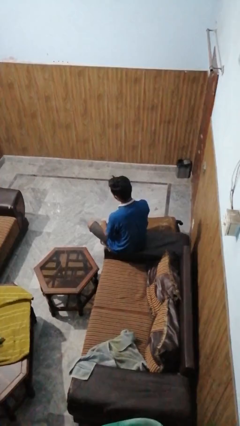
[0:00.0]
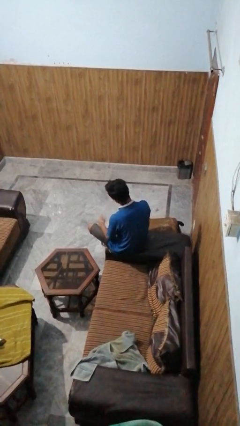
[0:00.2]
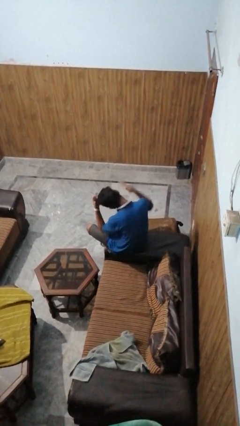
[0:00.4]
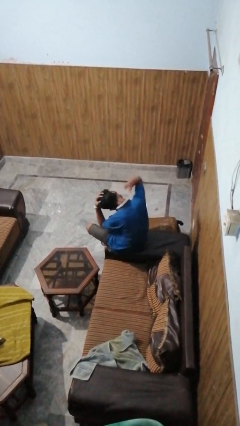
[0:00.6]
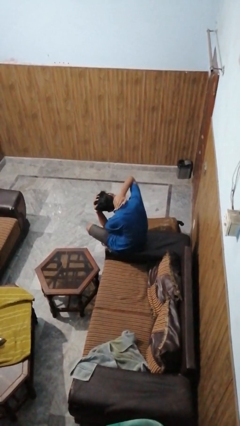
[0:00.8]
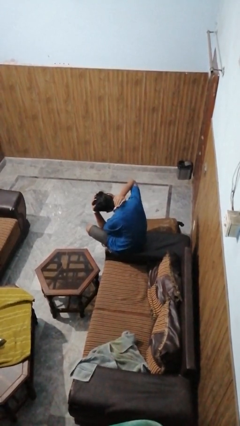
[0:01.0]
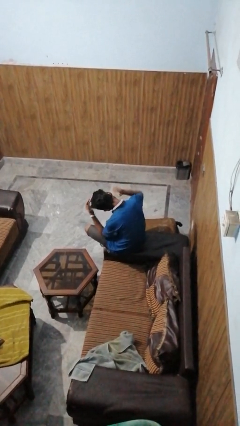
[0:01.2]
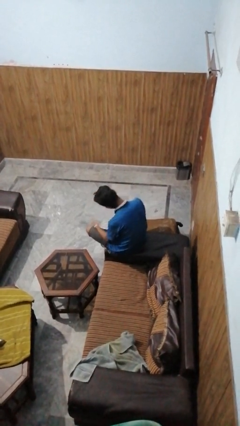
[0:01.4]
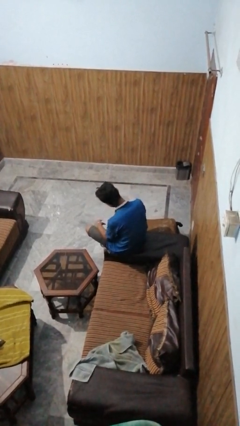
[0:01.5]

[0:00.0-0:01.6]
person swats bug

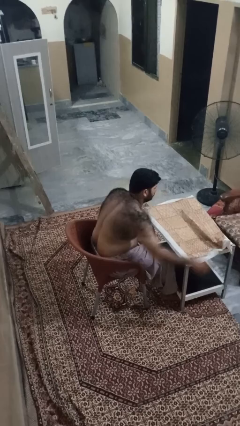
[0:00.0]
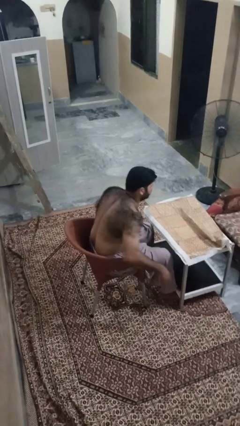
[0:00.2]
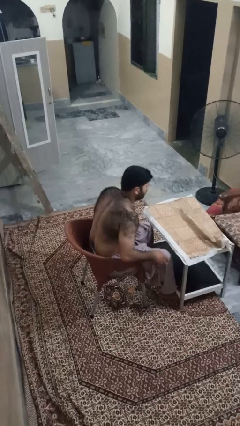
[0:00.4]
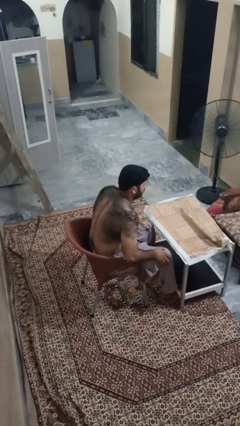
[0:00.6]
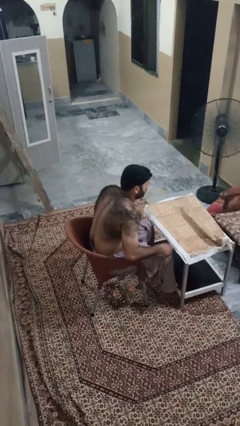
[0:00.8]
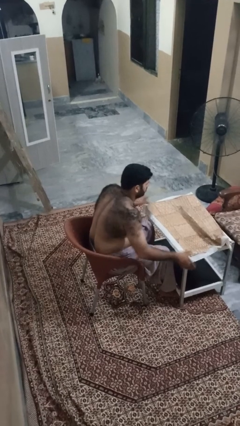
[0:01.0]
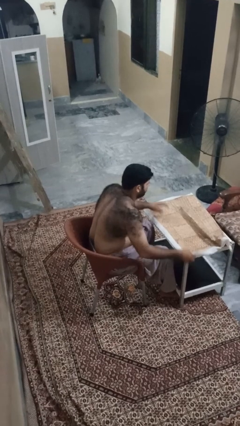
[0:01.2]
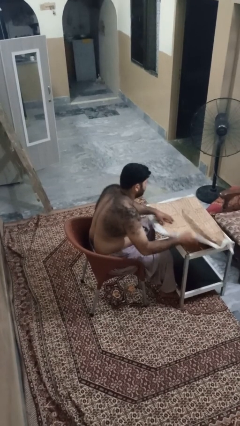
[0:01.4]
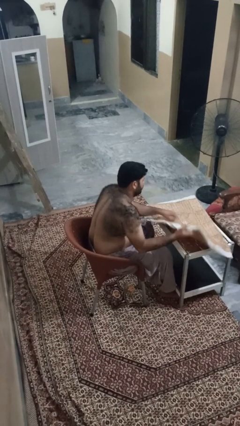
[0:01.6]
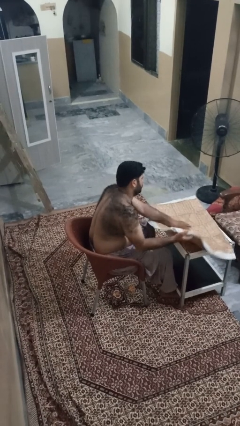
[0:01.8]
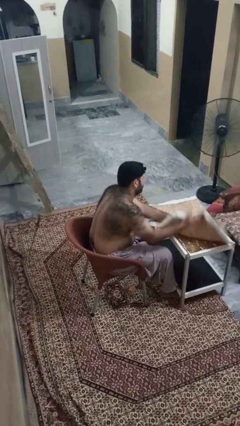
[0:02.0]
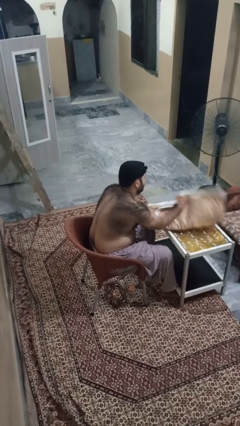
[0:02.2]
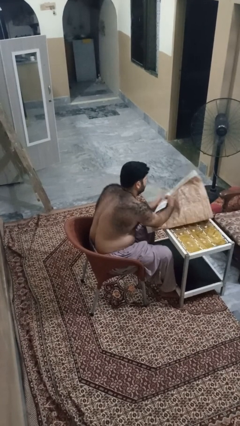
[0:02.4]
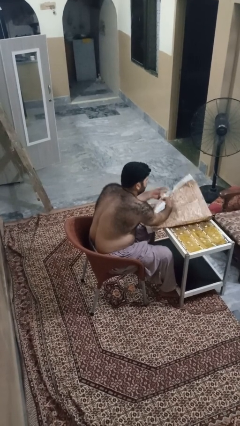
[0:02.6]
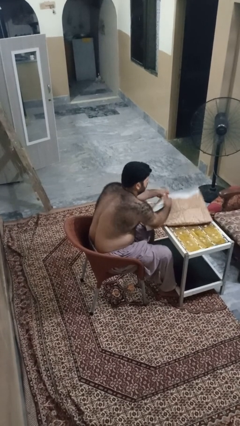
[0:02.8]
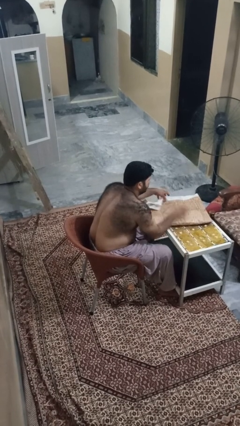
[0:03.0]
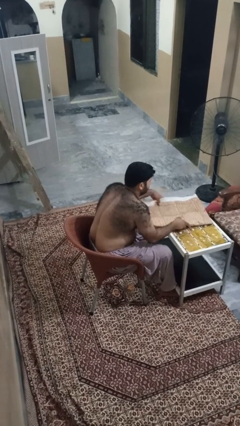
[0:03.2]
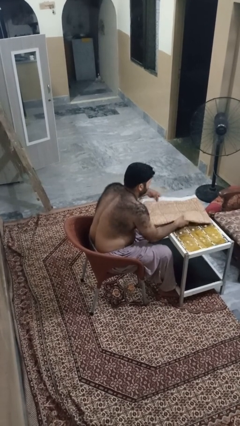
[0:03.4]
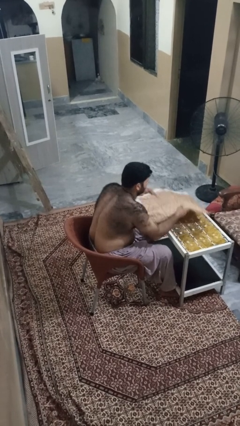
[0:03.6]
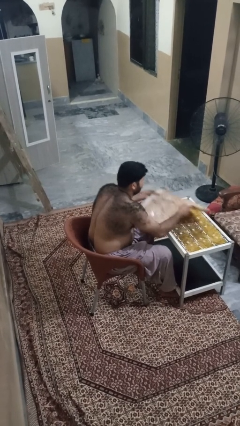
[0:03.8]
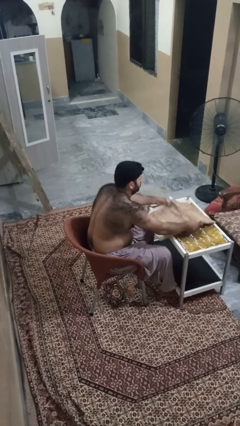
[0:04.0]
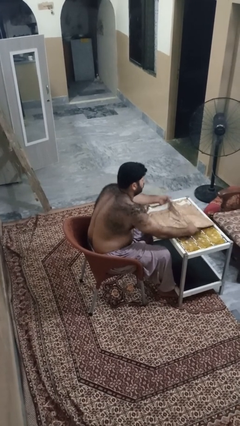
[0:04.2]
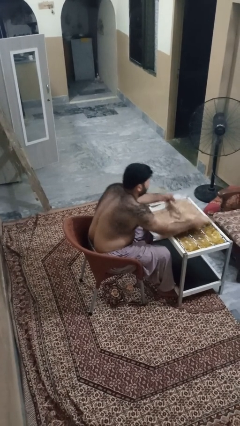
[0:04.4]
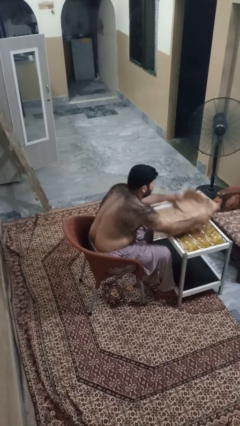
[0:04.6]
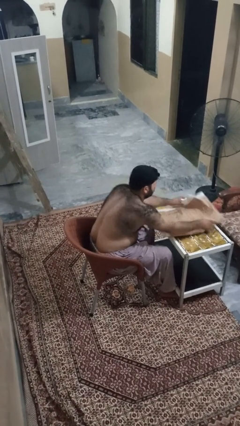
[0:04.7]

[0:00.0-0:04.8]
person folds tablecloth

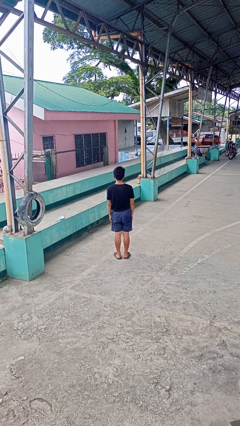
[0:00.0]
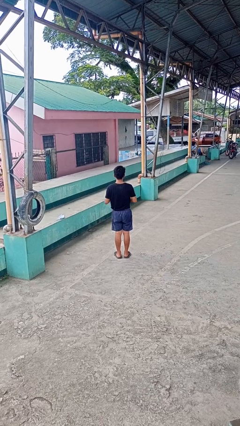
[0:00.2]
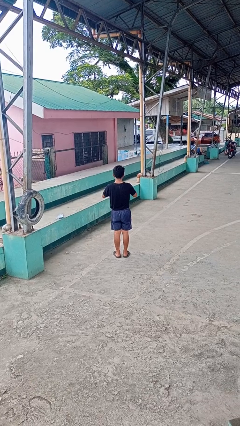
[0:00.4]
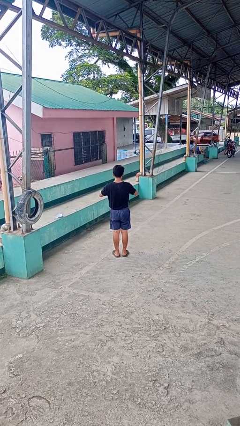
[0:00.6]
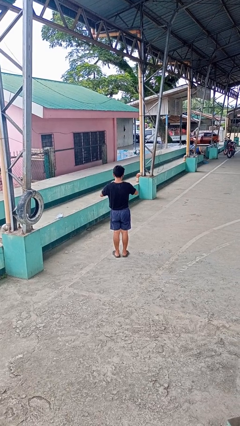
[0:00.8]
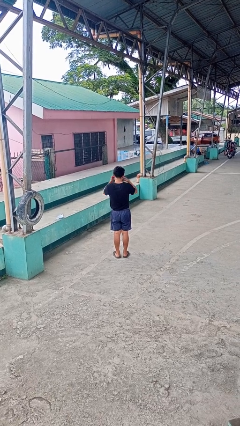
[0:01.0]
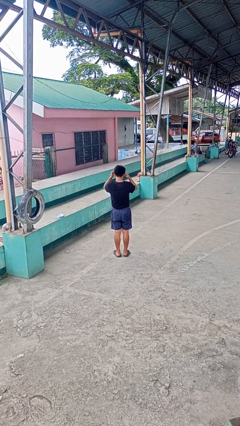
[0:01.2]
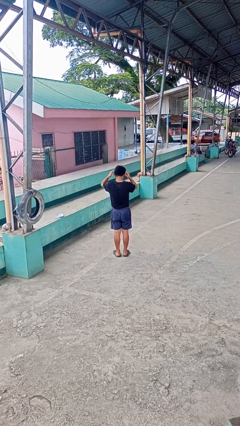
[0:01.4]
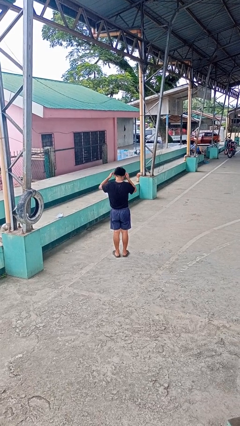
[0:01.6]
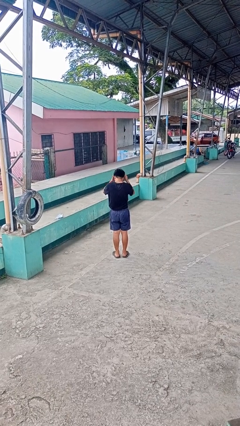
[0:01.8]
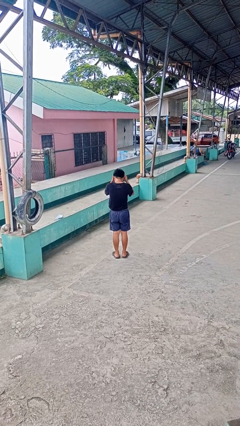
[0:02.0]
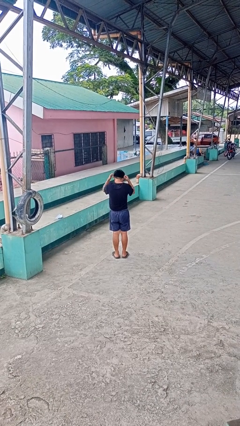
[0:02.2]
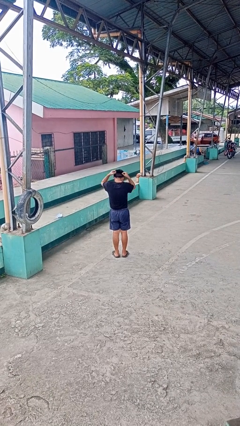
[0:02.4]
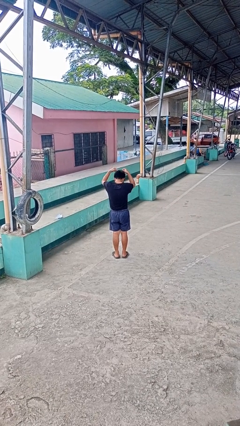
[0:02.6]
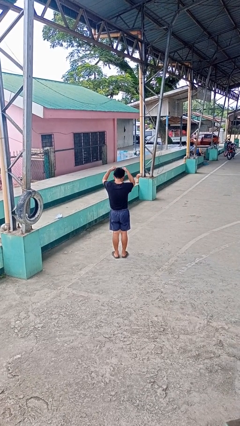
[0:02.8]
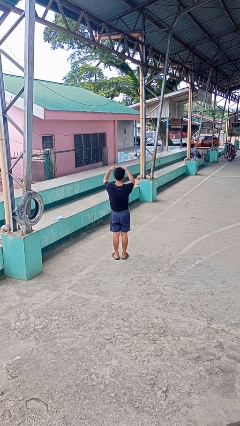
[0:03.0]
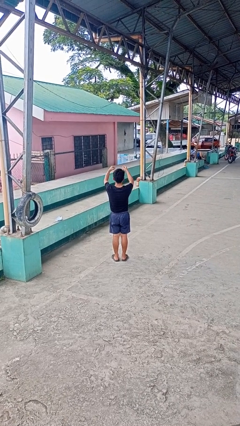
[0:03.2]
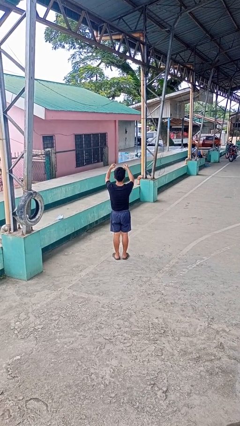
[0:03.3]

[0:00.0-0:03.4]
person takes off necklace

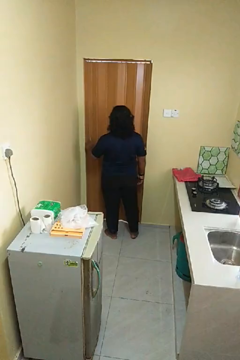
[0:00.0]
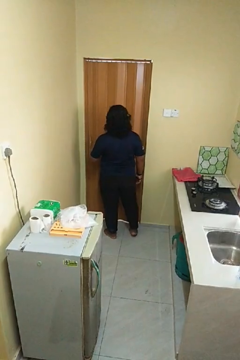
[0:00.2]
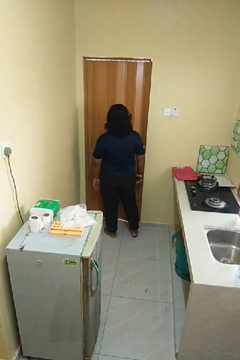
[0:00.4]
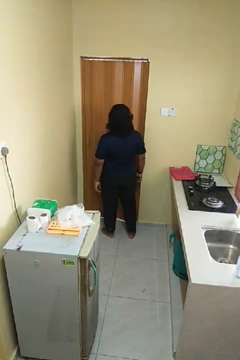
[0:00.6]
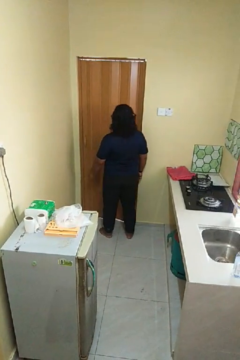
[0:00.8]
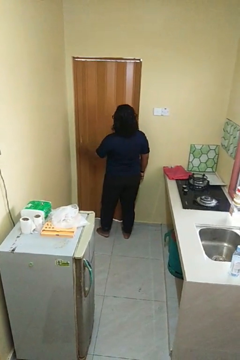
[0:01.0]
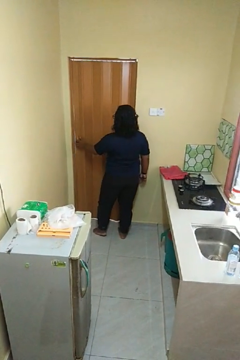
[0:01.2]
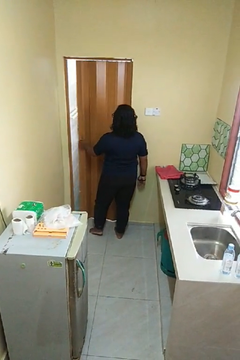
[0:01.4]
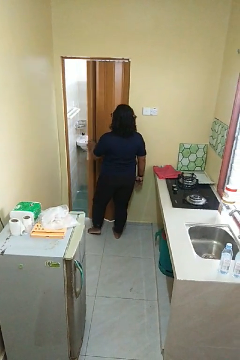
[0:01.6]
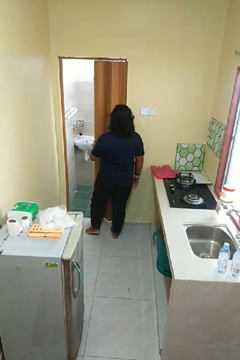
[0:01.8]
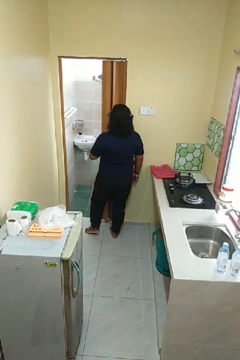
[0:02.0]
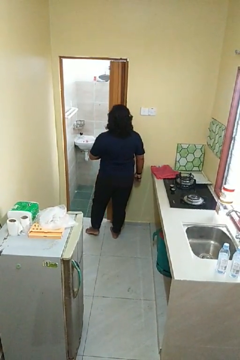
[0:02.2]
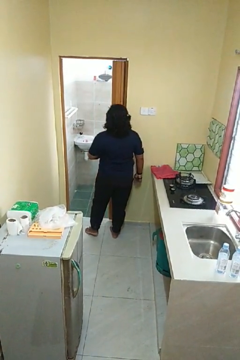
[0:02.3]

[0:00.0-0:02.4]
person opens sliding door

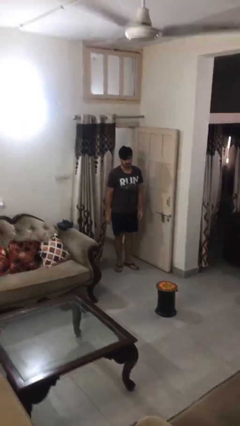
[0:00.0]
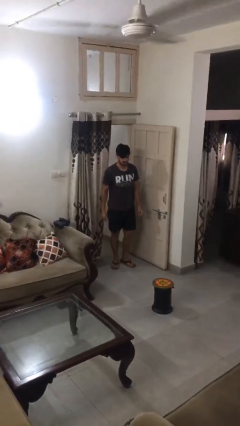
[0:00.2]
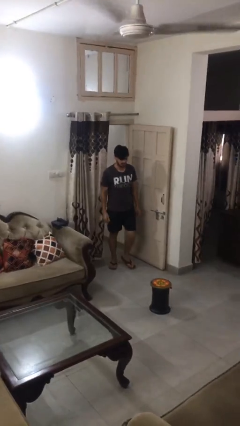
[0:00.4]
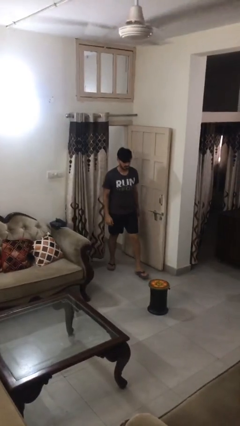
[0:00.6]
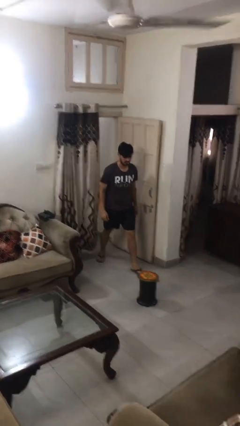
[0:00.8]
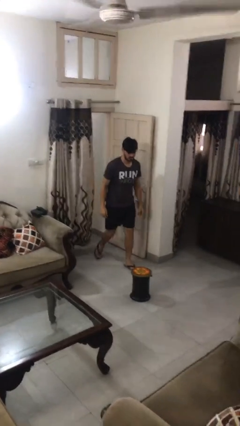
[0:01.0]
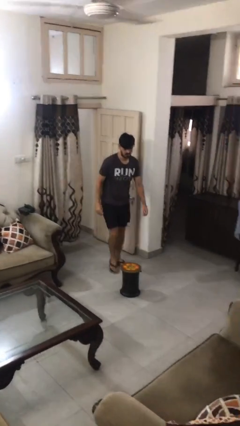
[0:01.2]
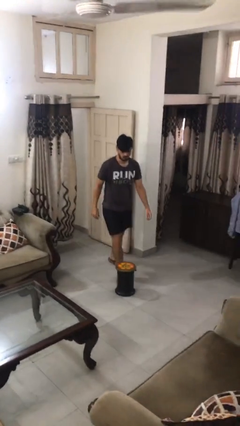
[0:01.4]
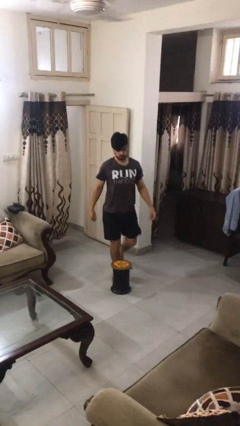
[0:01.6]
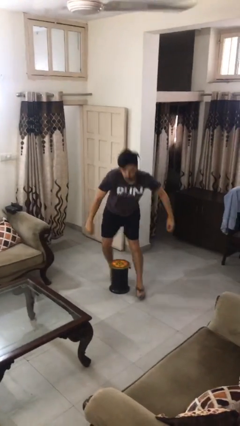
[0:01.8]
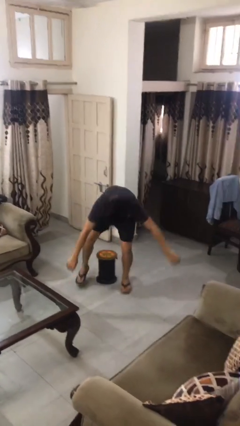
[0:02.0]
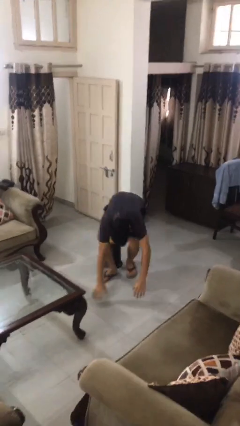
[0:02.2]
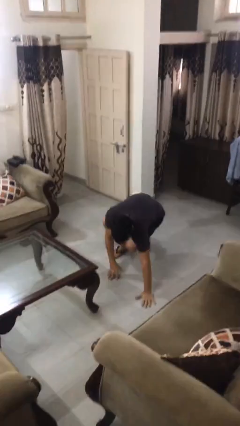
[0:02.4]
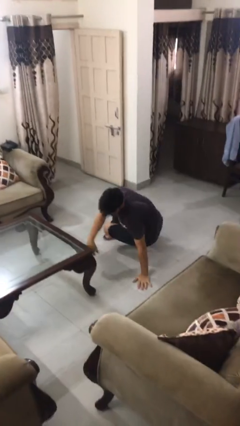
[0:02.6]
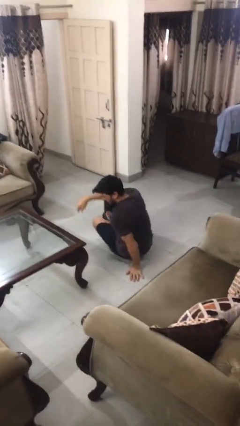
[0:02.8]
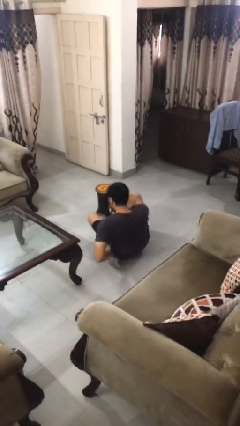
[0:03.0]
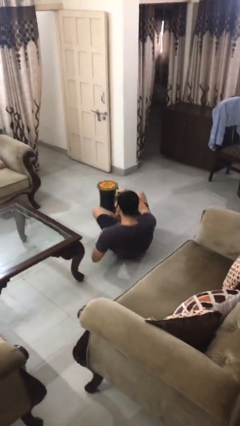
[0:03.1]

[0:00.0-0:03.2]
person trips on object on floor

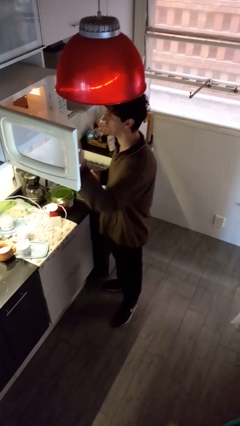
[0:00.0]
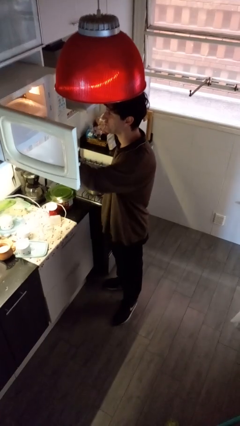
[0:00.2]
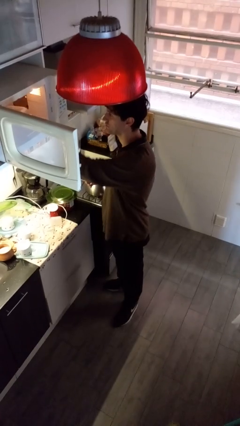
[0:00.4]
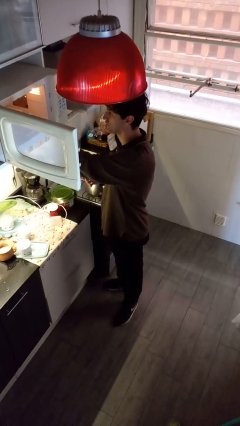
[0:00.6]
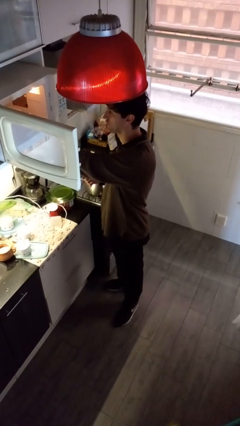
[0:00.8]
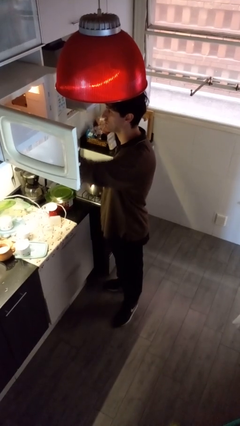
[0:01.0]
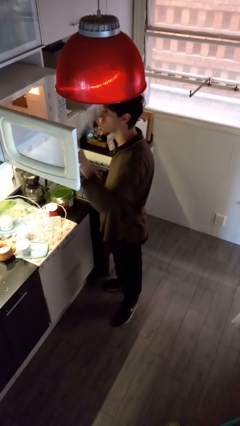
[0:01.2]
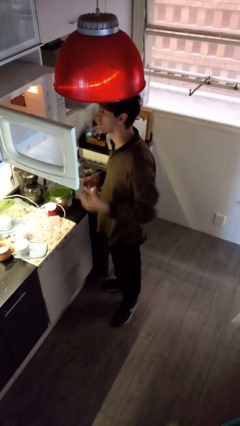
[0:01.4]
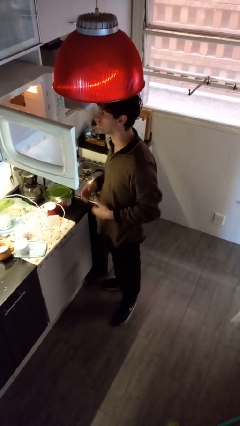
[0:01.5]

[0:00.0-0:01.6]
person puts object into microwave

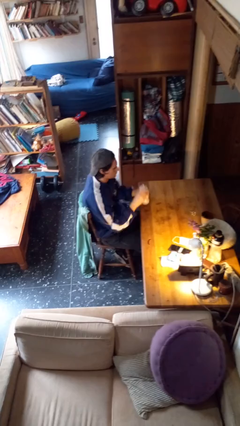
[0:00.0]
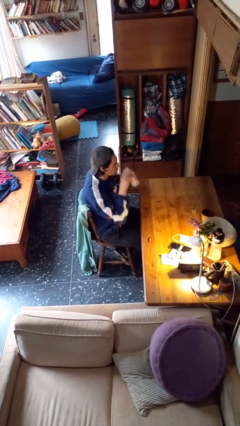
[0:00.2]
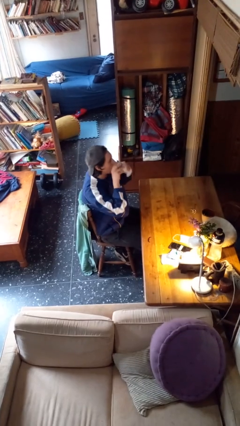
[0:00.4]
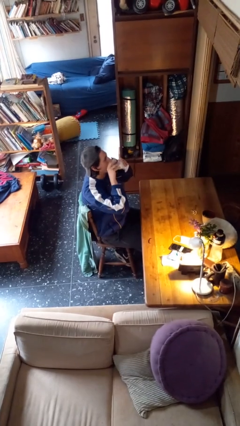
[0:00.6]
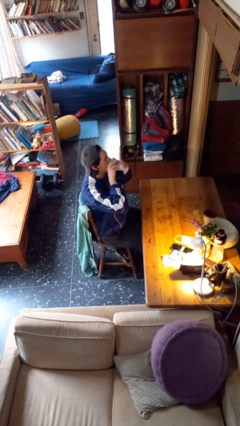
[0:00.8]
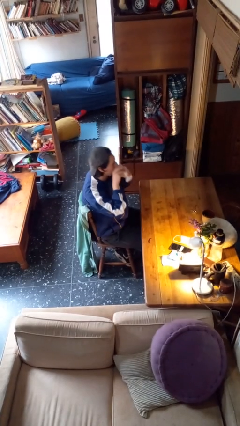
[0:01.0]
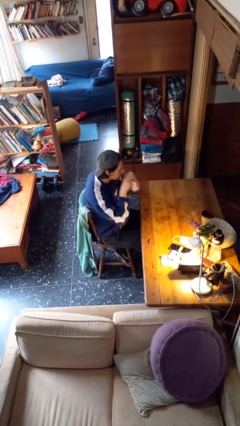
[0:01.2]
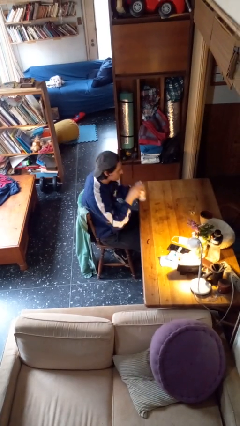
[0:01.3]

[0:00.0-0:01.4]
person drinks from mug
